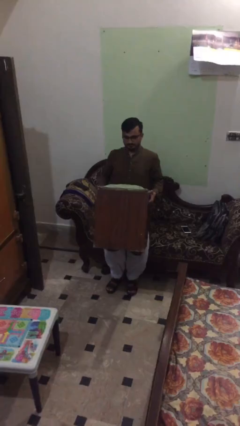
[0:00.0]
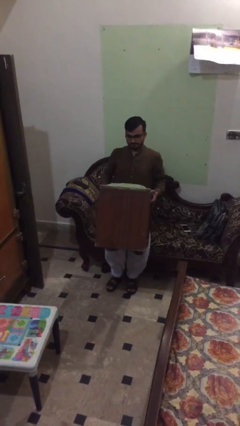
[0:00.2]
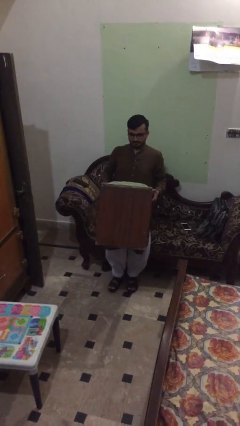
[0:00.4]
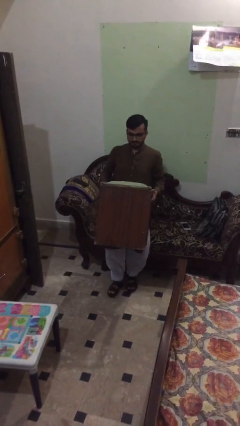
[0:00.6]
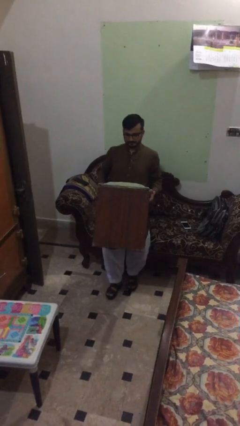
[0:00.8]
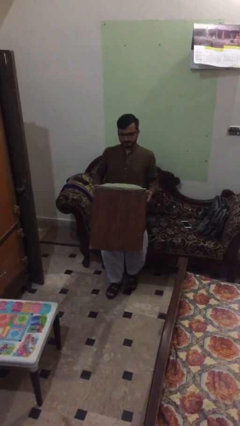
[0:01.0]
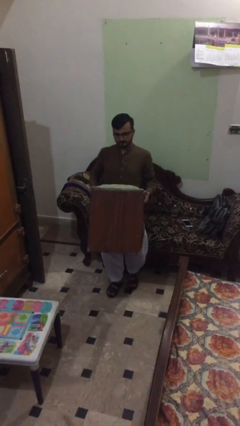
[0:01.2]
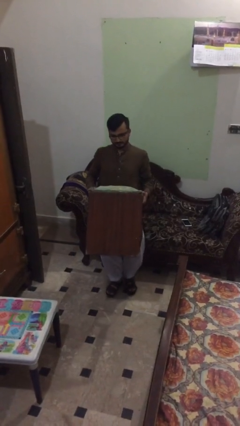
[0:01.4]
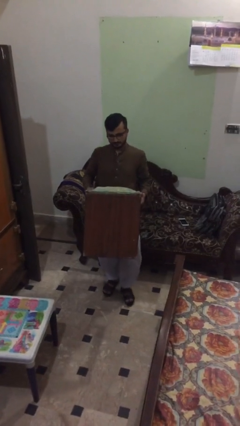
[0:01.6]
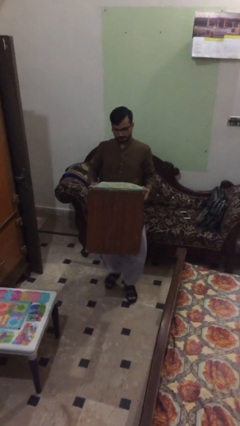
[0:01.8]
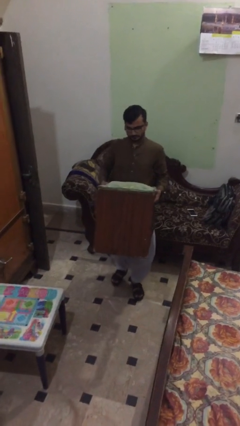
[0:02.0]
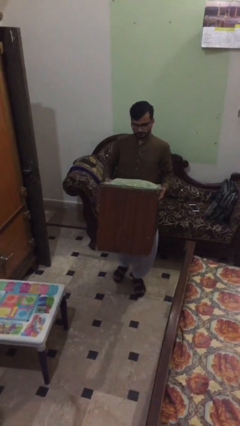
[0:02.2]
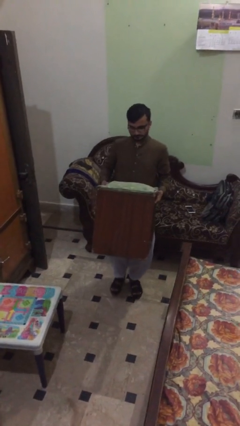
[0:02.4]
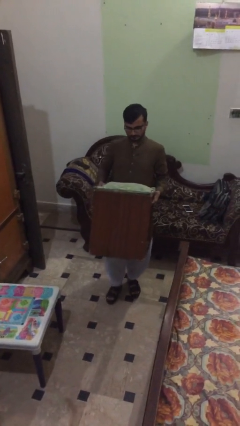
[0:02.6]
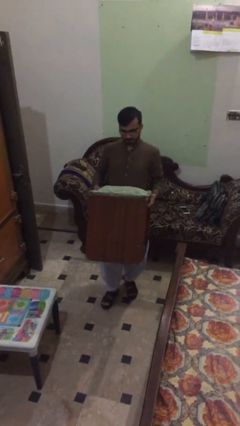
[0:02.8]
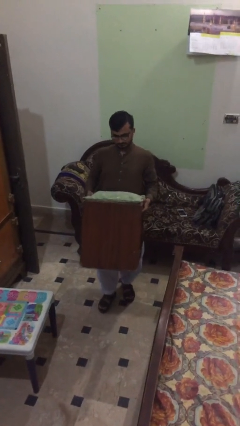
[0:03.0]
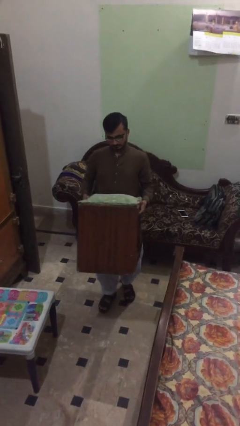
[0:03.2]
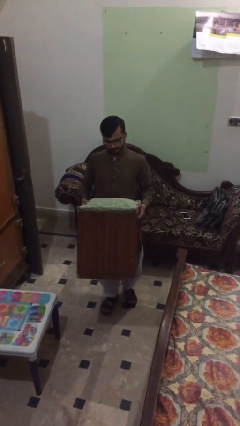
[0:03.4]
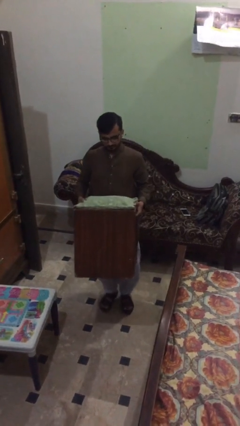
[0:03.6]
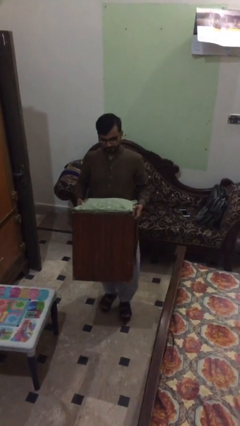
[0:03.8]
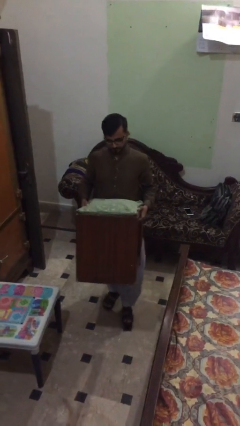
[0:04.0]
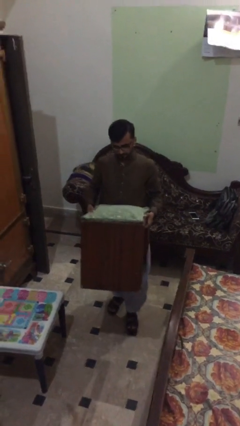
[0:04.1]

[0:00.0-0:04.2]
person carries heavy object

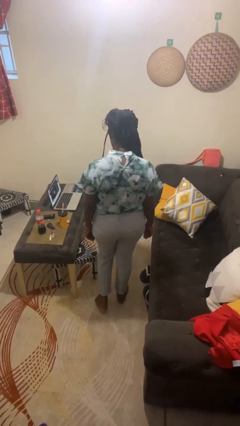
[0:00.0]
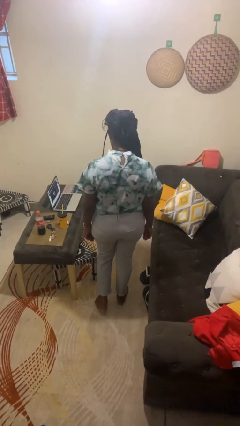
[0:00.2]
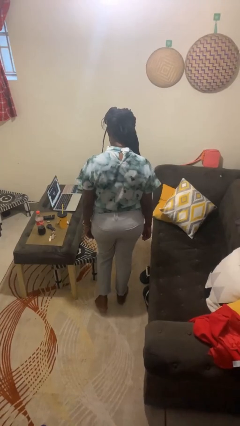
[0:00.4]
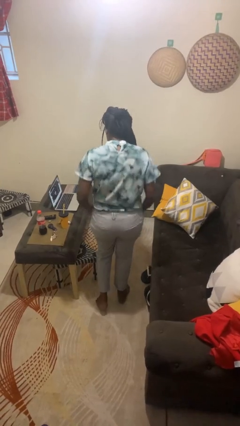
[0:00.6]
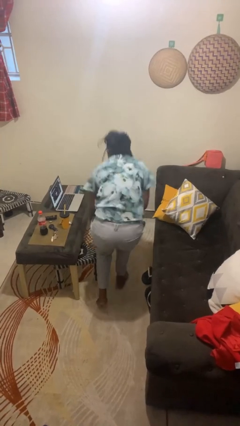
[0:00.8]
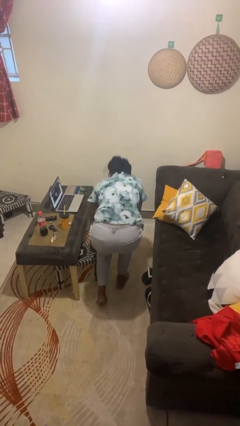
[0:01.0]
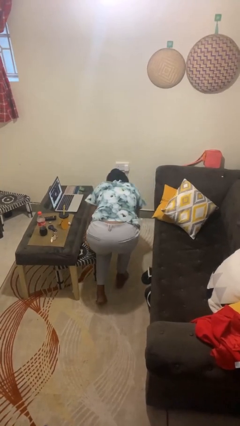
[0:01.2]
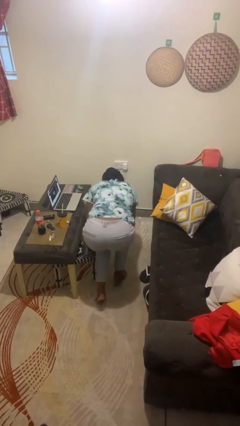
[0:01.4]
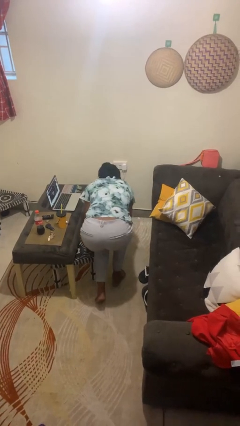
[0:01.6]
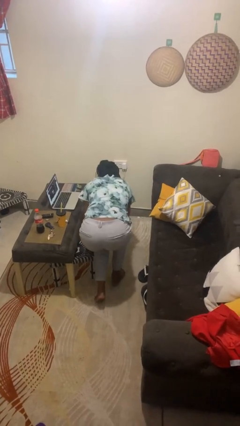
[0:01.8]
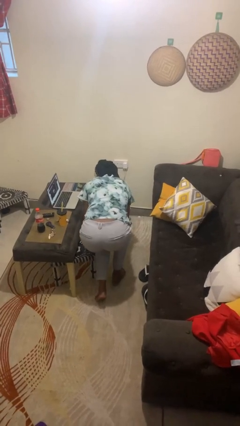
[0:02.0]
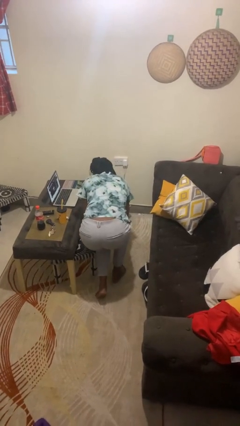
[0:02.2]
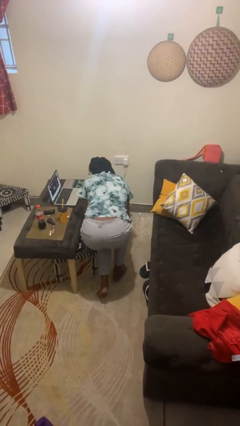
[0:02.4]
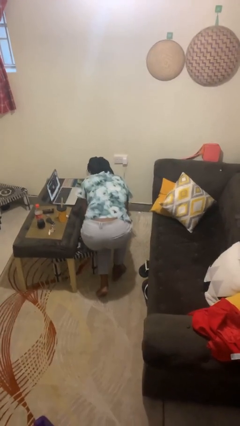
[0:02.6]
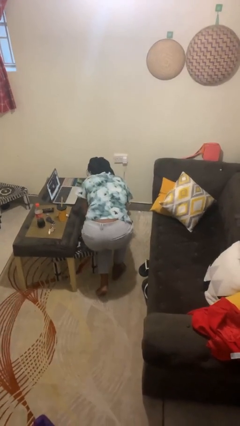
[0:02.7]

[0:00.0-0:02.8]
person trips on object on floor

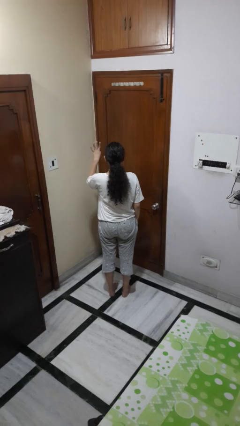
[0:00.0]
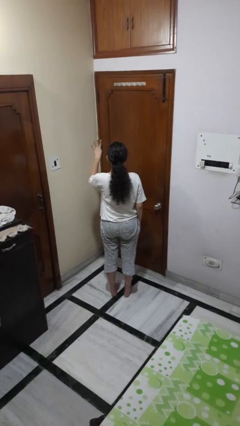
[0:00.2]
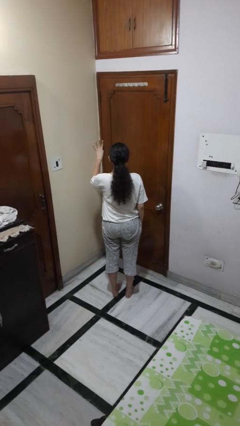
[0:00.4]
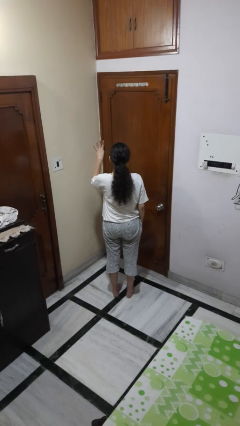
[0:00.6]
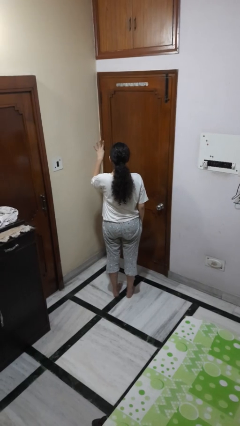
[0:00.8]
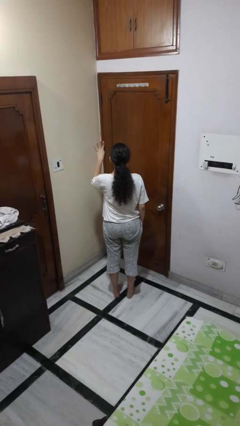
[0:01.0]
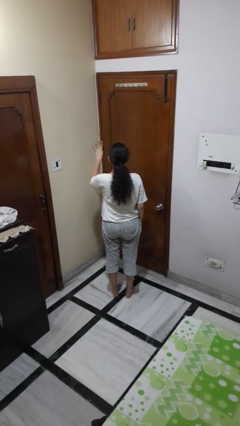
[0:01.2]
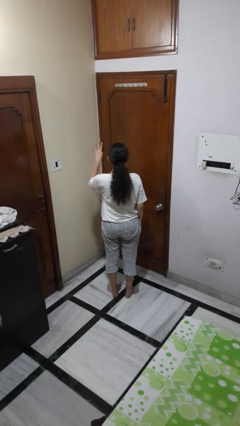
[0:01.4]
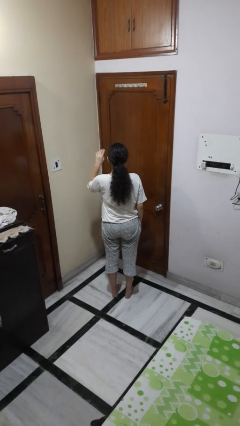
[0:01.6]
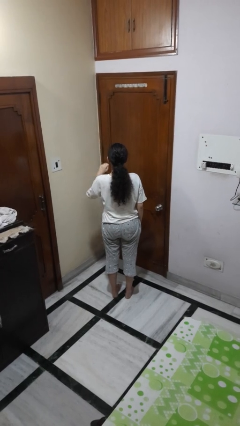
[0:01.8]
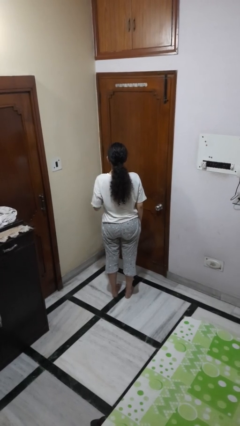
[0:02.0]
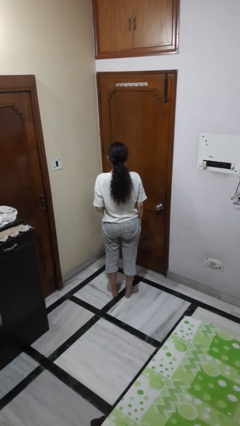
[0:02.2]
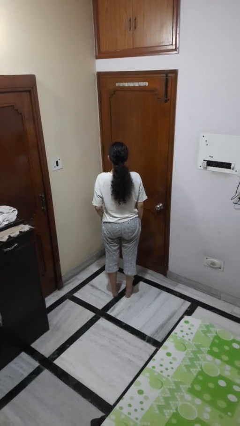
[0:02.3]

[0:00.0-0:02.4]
person gestures number four

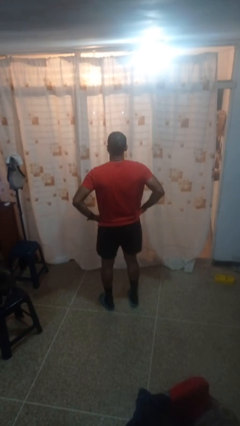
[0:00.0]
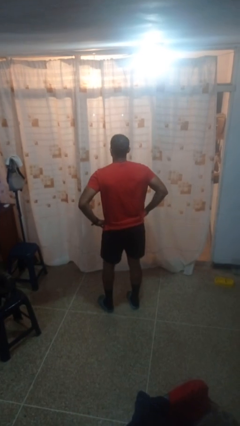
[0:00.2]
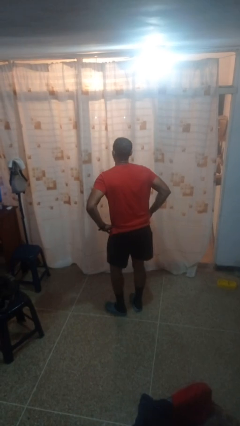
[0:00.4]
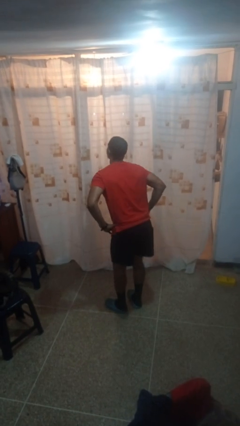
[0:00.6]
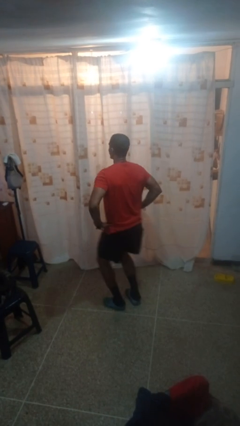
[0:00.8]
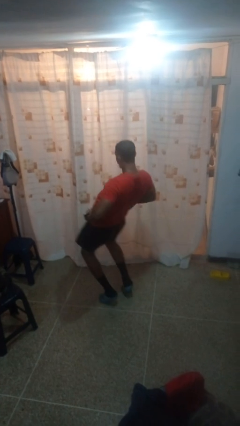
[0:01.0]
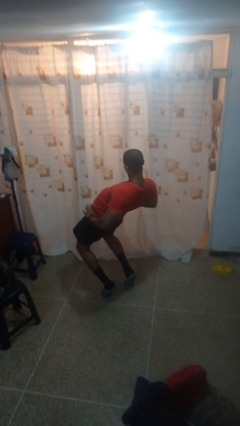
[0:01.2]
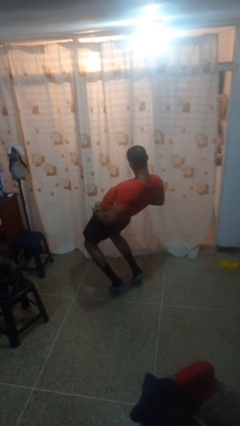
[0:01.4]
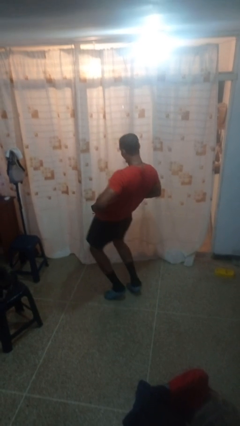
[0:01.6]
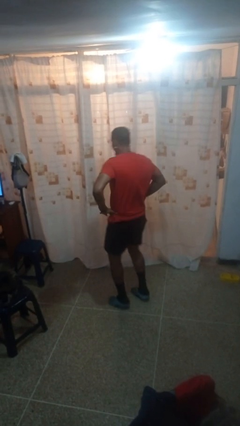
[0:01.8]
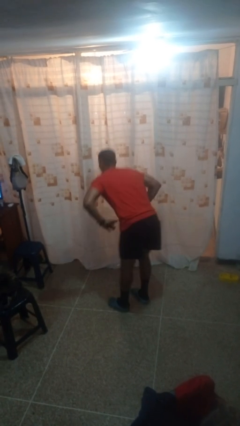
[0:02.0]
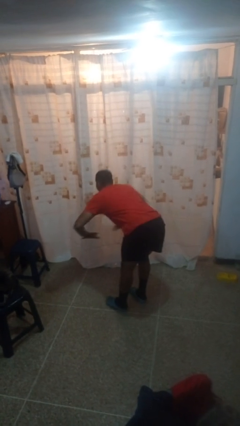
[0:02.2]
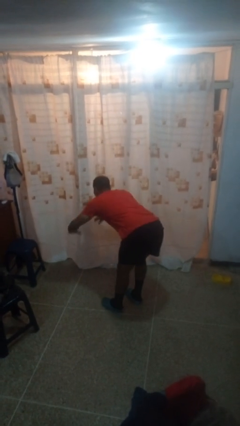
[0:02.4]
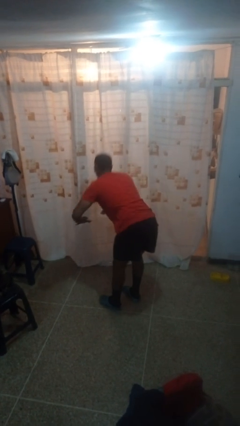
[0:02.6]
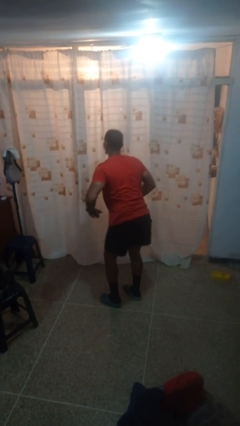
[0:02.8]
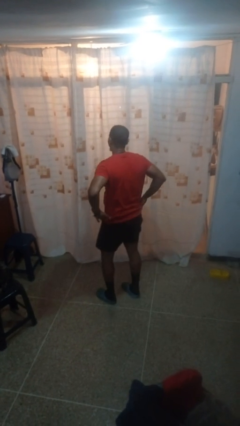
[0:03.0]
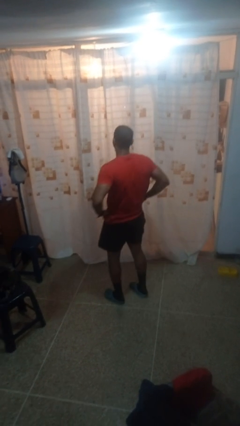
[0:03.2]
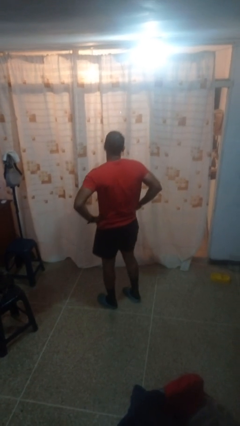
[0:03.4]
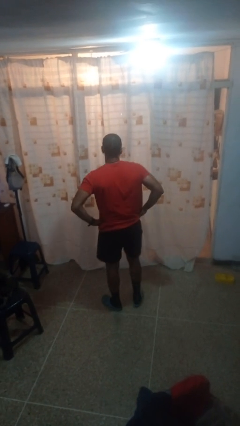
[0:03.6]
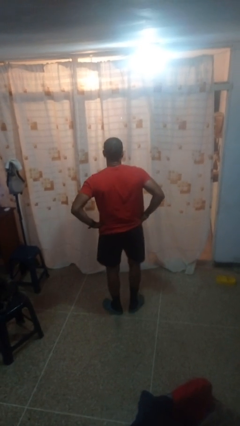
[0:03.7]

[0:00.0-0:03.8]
person wiggles hips

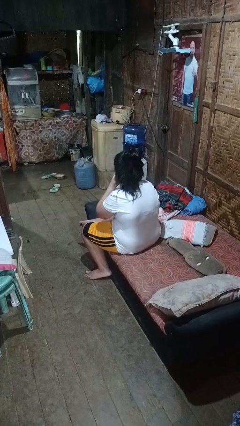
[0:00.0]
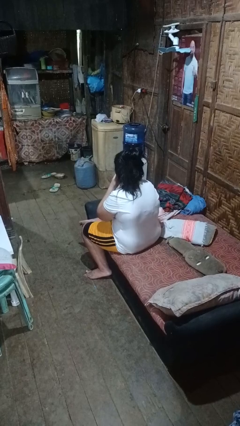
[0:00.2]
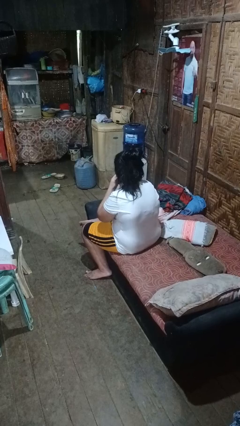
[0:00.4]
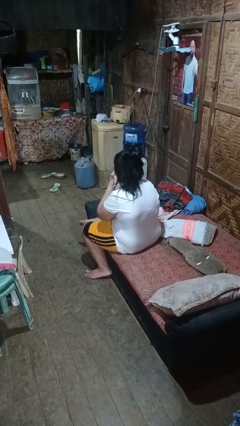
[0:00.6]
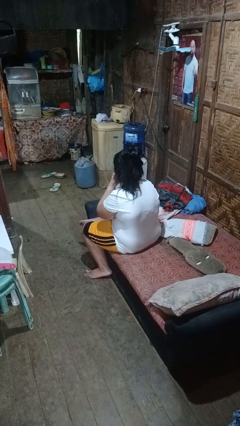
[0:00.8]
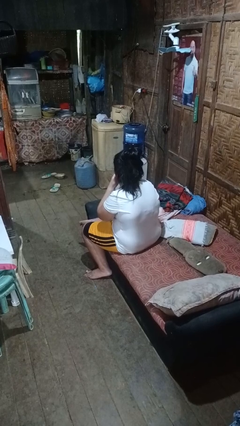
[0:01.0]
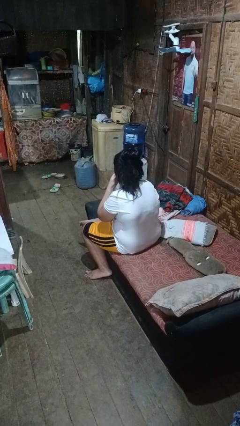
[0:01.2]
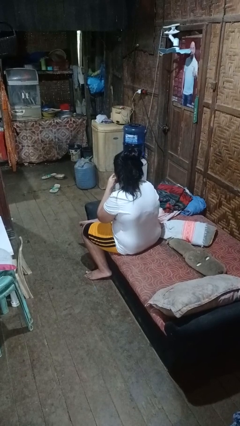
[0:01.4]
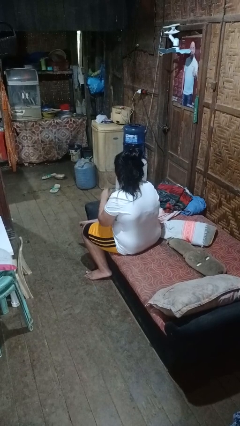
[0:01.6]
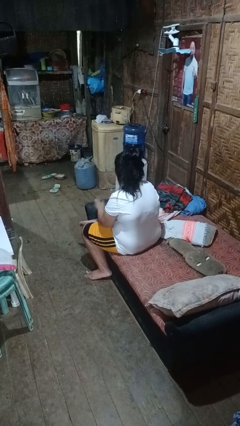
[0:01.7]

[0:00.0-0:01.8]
person strokes chin

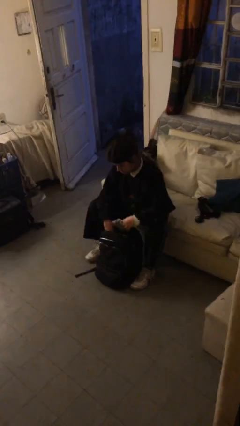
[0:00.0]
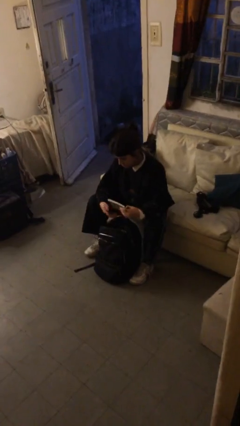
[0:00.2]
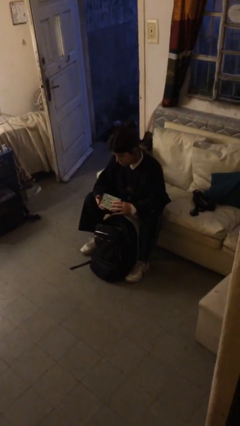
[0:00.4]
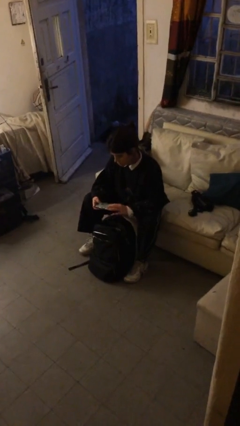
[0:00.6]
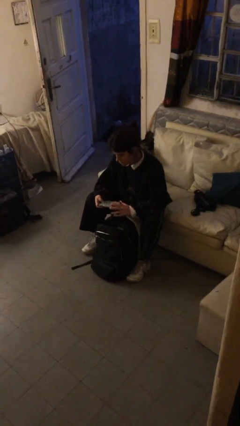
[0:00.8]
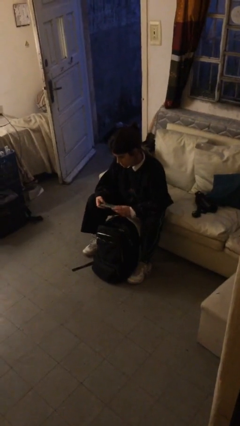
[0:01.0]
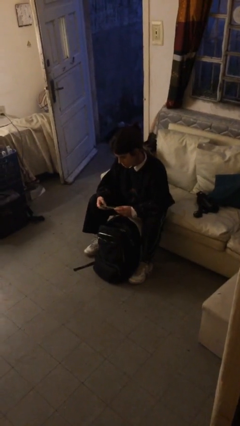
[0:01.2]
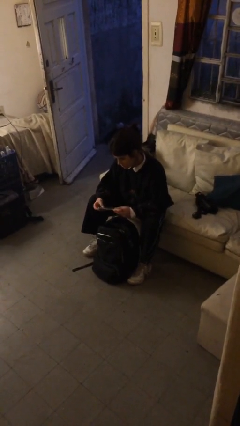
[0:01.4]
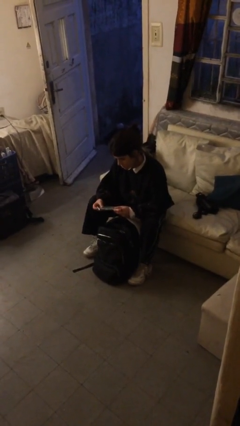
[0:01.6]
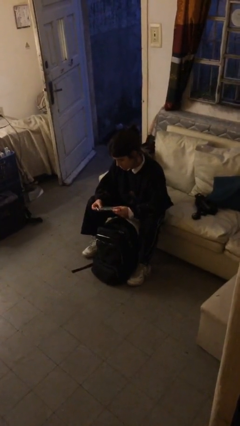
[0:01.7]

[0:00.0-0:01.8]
person takes object from backpack

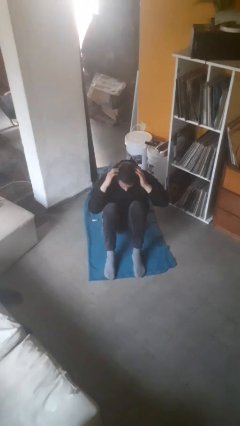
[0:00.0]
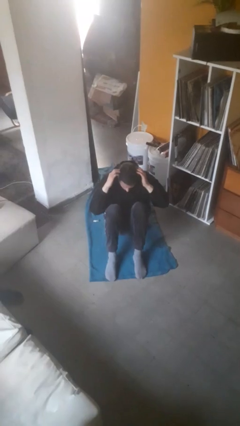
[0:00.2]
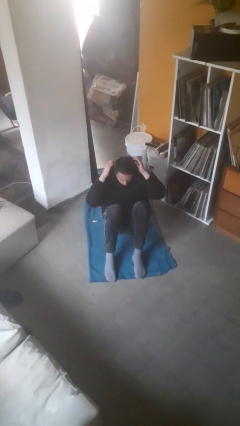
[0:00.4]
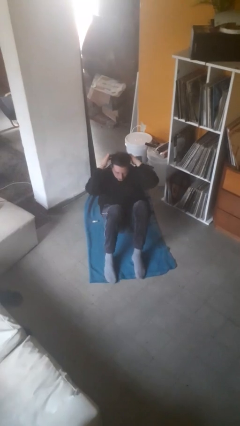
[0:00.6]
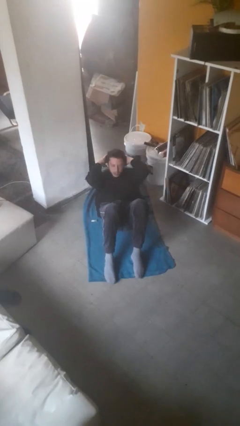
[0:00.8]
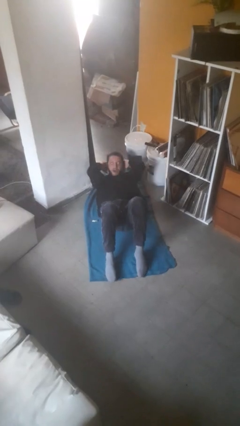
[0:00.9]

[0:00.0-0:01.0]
person exercises with situp
